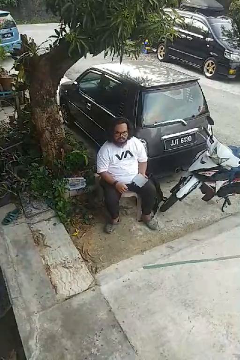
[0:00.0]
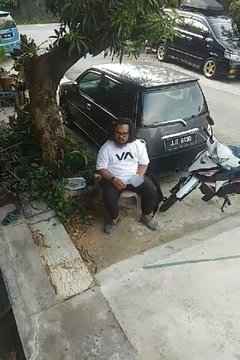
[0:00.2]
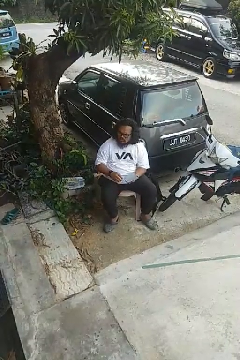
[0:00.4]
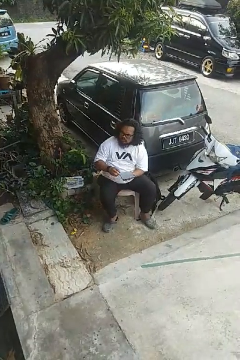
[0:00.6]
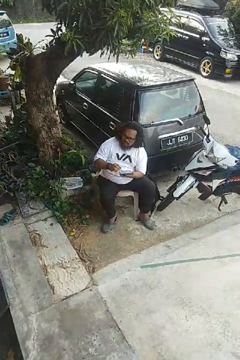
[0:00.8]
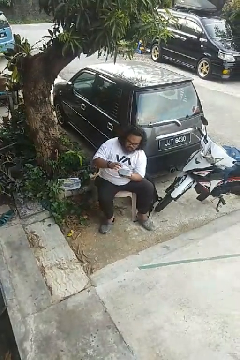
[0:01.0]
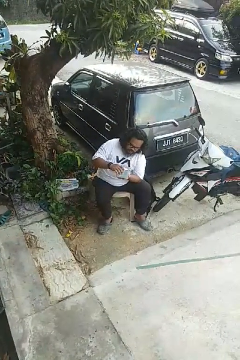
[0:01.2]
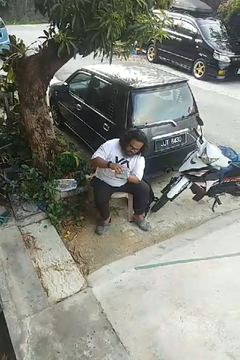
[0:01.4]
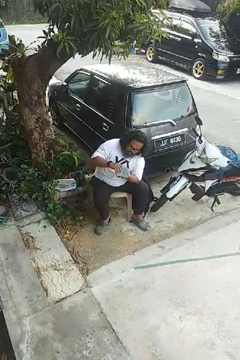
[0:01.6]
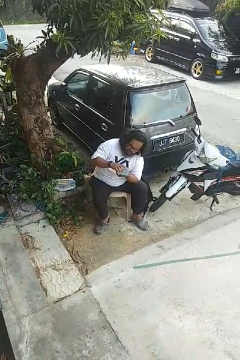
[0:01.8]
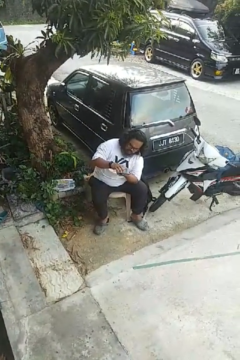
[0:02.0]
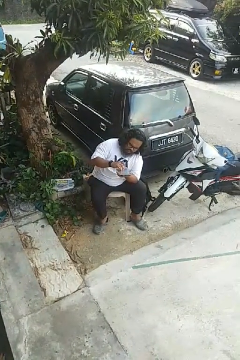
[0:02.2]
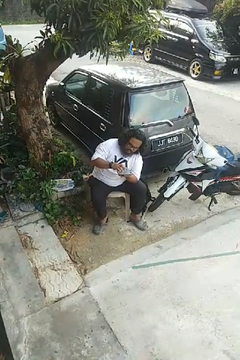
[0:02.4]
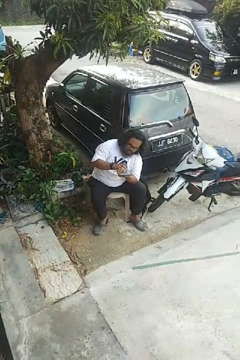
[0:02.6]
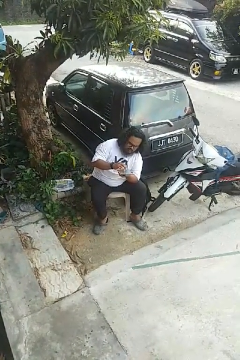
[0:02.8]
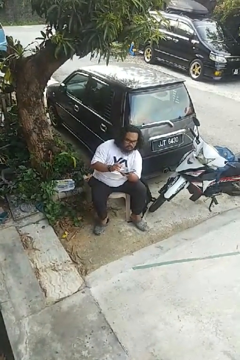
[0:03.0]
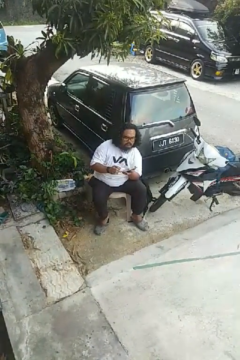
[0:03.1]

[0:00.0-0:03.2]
person interacts with tablet

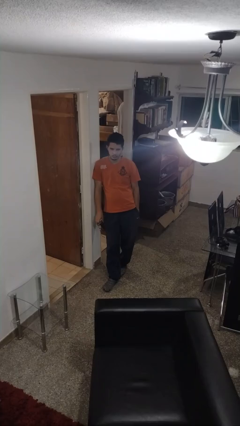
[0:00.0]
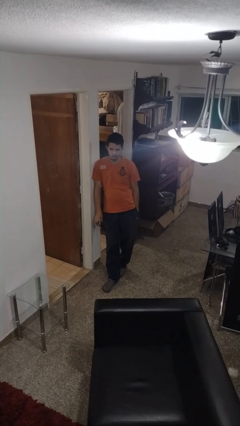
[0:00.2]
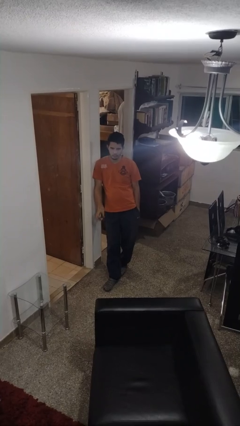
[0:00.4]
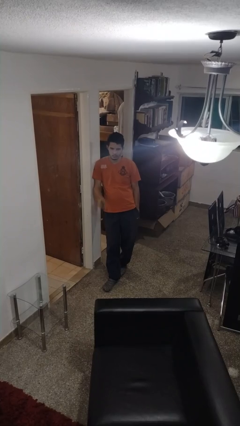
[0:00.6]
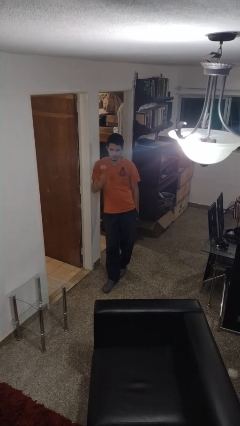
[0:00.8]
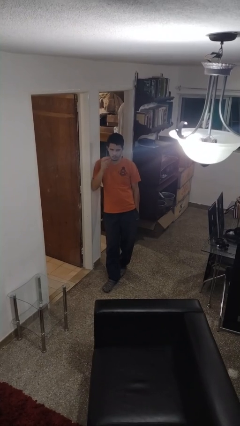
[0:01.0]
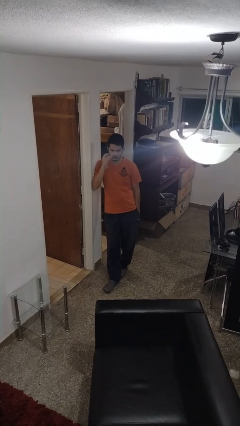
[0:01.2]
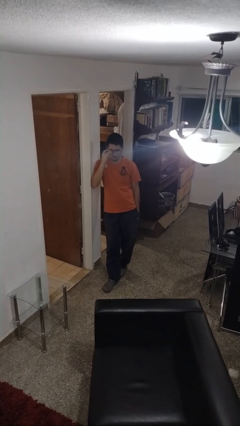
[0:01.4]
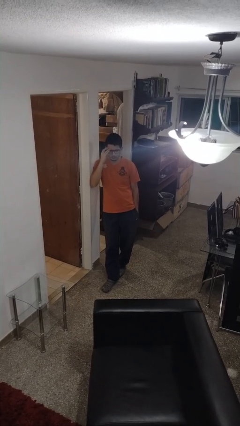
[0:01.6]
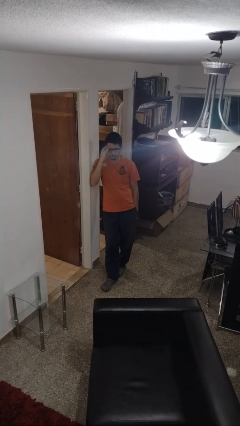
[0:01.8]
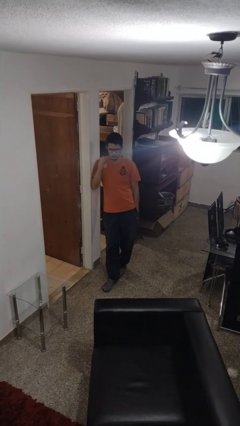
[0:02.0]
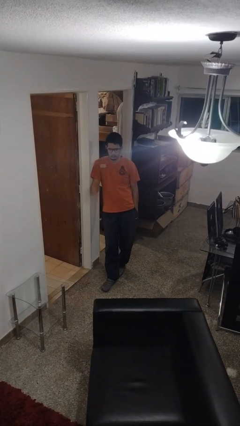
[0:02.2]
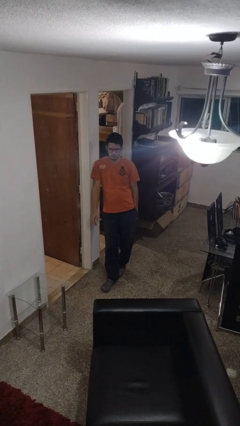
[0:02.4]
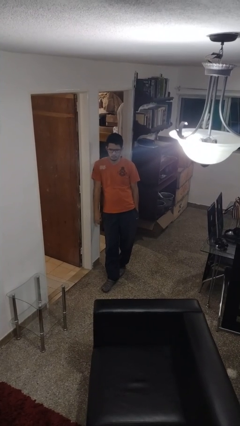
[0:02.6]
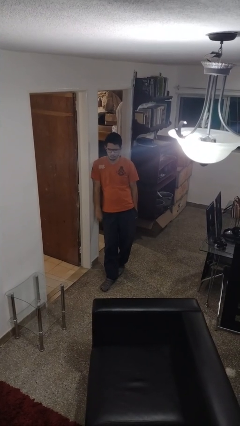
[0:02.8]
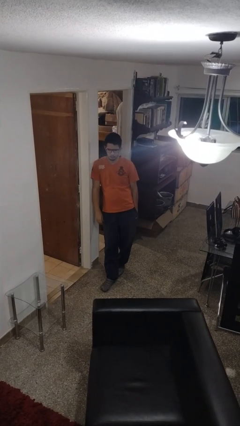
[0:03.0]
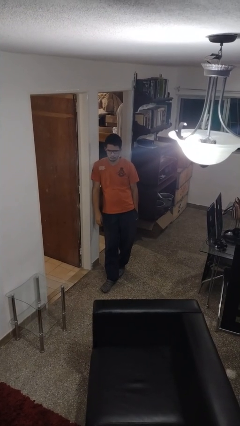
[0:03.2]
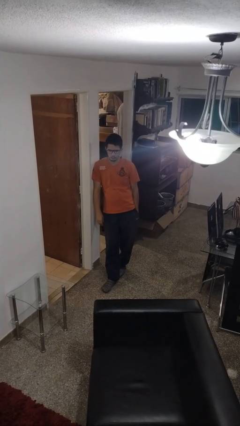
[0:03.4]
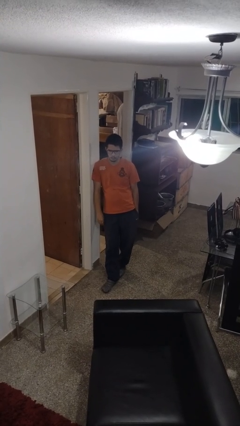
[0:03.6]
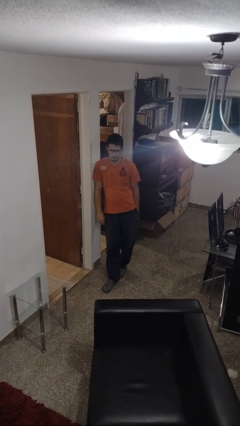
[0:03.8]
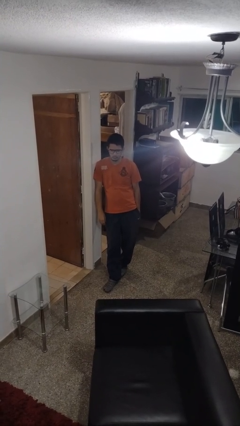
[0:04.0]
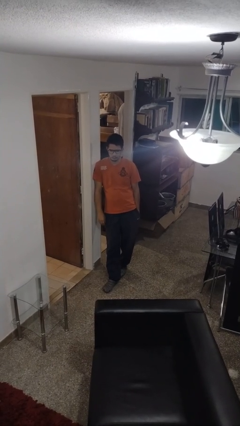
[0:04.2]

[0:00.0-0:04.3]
person puts on glasses

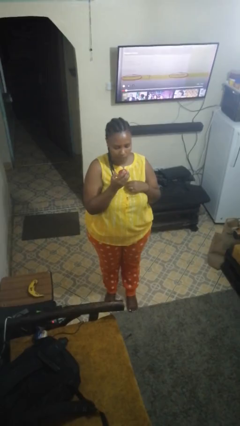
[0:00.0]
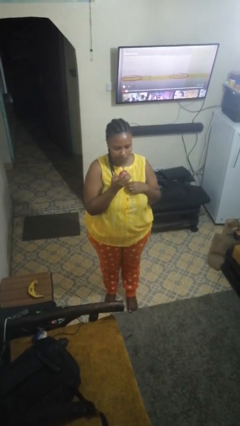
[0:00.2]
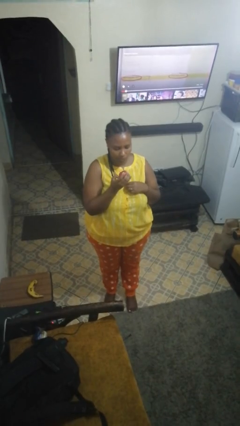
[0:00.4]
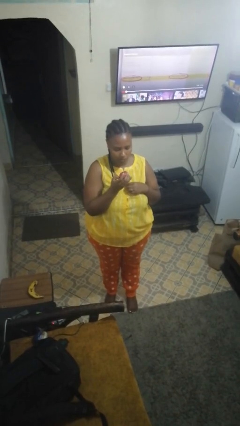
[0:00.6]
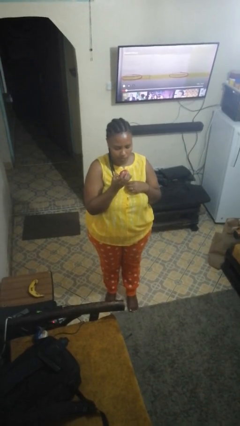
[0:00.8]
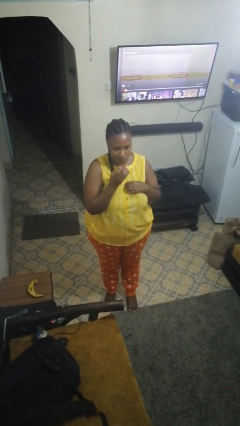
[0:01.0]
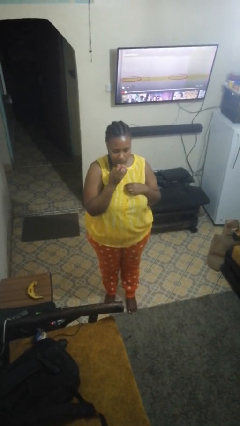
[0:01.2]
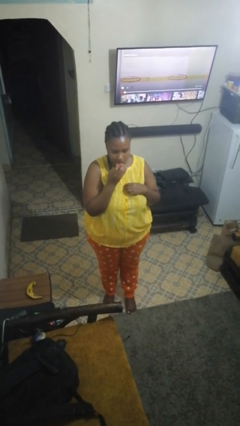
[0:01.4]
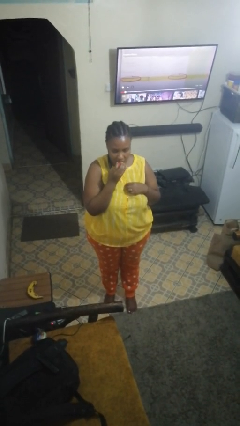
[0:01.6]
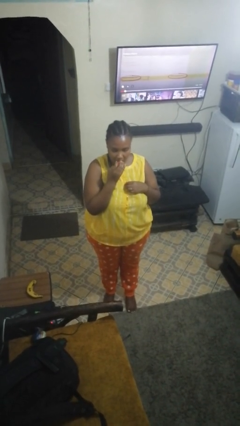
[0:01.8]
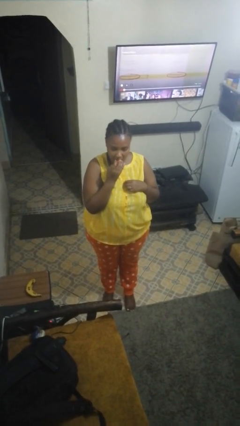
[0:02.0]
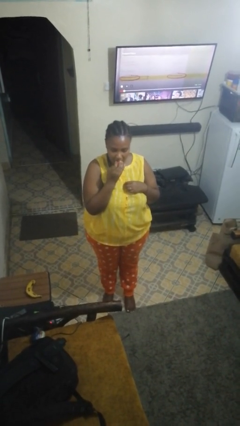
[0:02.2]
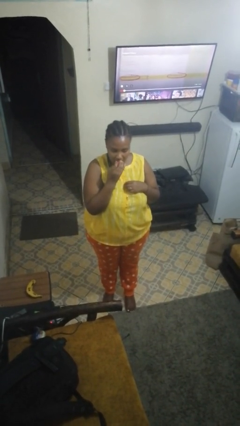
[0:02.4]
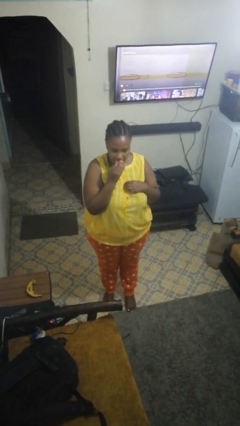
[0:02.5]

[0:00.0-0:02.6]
person eats apple

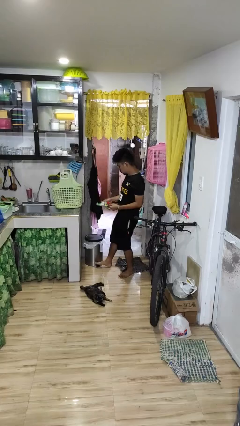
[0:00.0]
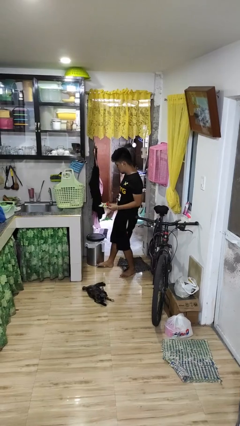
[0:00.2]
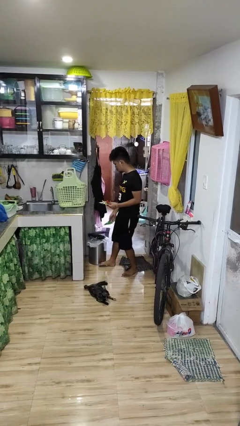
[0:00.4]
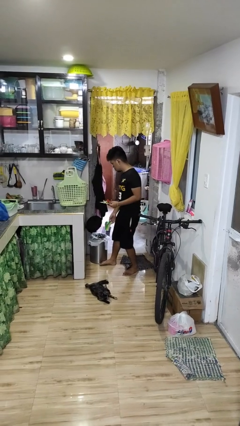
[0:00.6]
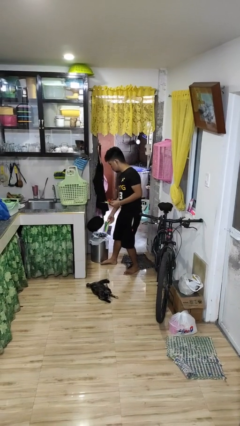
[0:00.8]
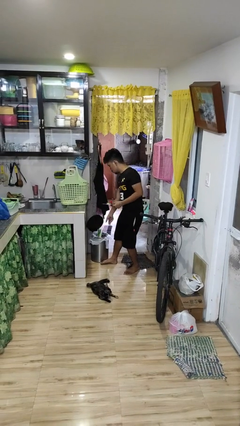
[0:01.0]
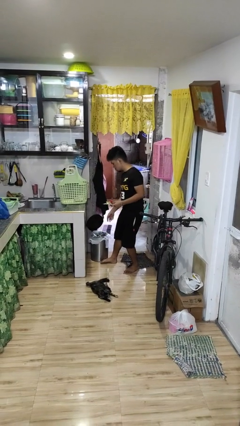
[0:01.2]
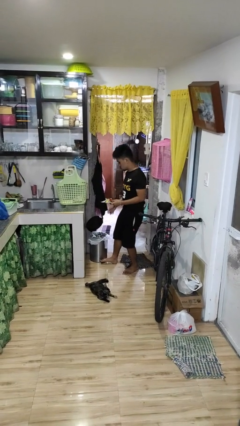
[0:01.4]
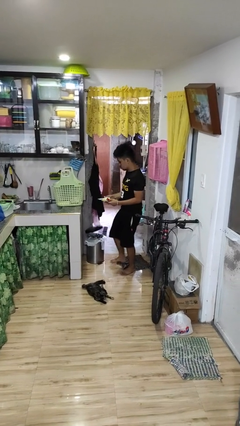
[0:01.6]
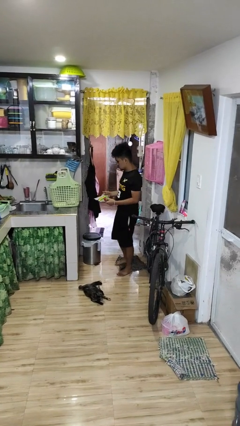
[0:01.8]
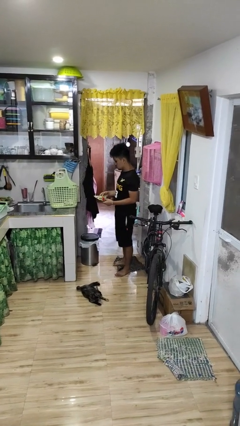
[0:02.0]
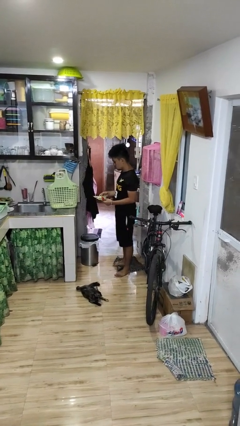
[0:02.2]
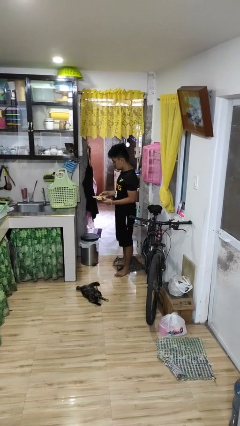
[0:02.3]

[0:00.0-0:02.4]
person discards trash

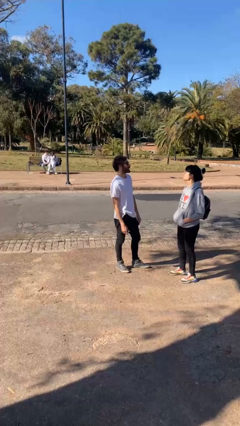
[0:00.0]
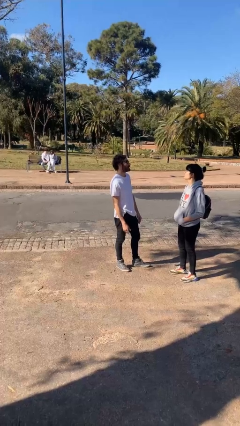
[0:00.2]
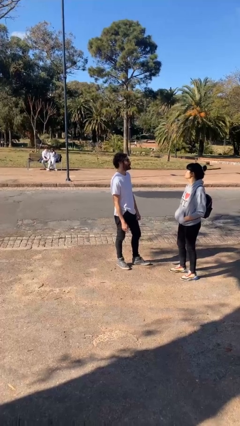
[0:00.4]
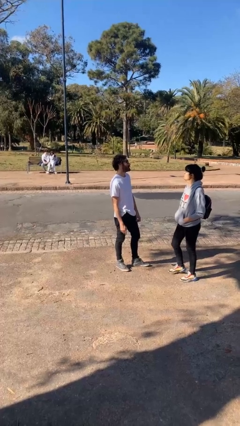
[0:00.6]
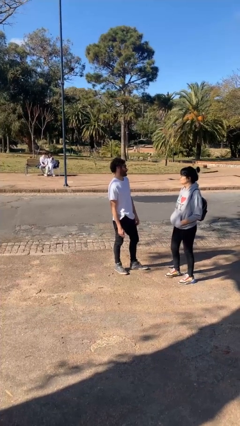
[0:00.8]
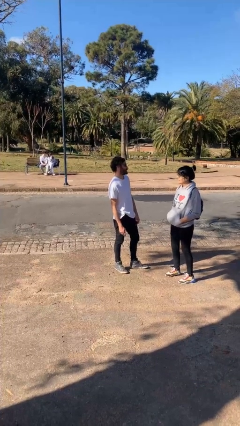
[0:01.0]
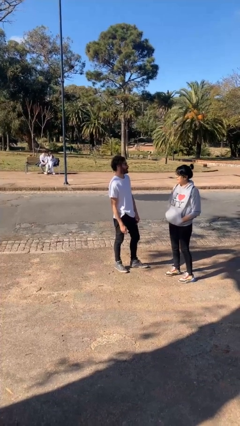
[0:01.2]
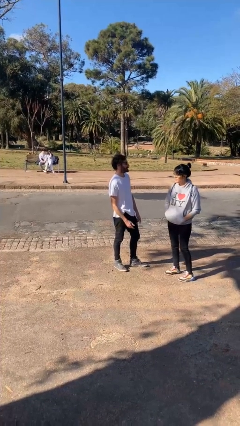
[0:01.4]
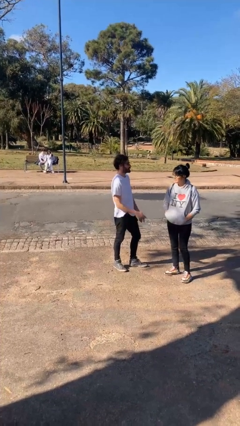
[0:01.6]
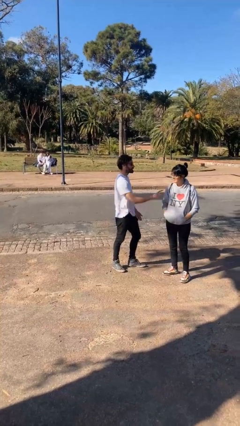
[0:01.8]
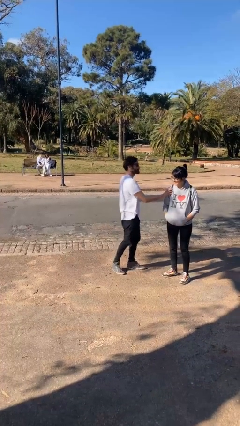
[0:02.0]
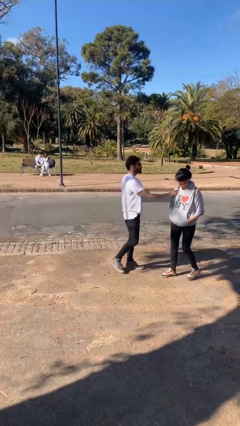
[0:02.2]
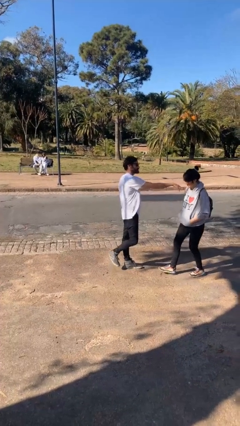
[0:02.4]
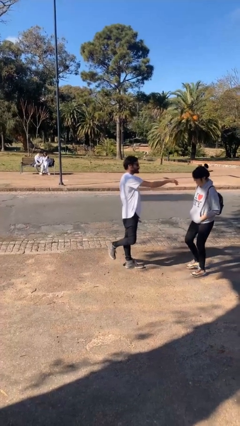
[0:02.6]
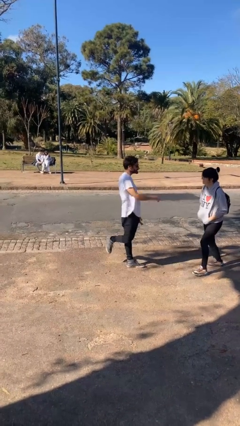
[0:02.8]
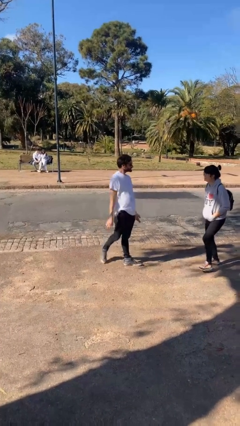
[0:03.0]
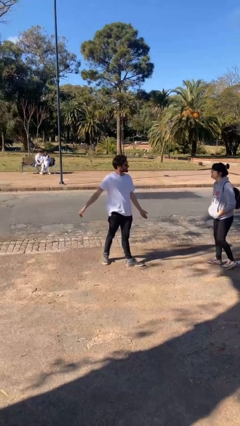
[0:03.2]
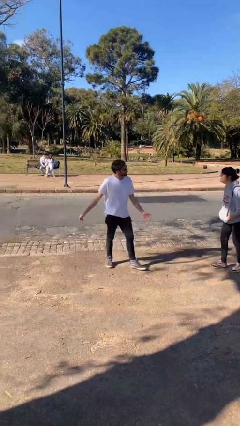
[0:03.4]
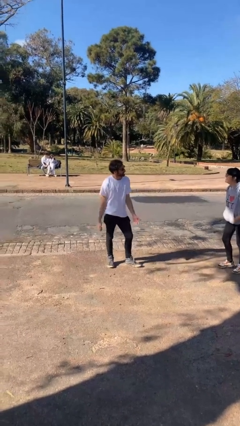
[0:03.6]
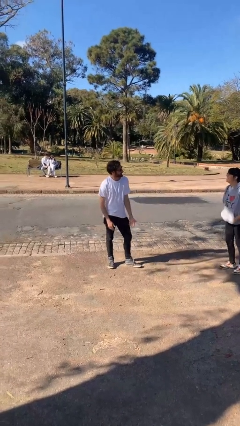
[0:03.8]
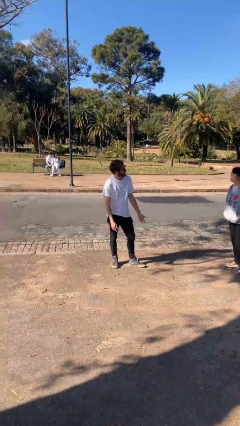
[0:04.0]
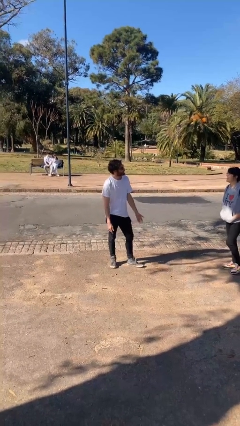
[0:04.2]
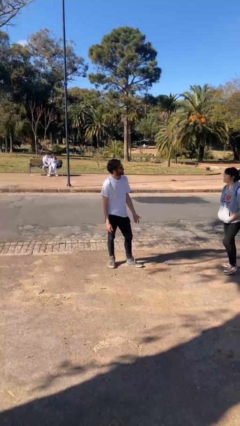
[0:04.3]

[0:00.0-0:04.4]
person shoves person

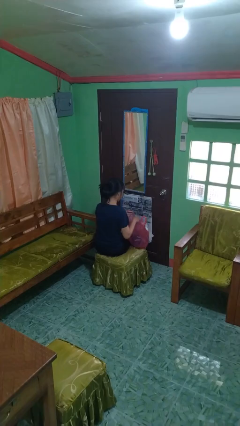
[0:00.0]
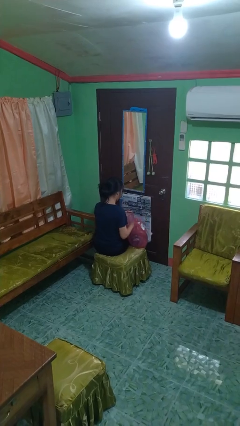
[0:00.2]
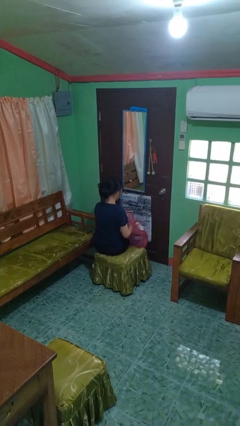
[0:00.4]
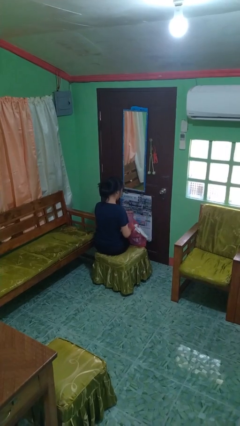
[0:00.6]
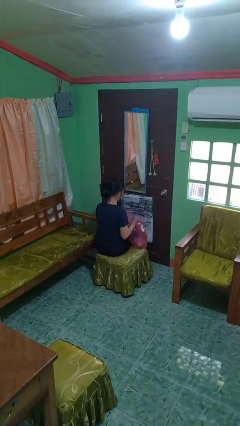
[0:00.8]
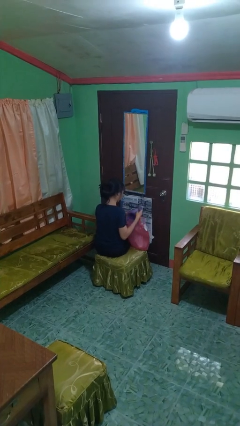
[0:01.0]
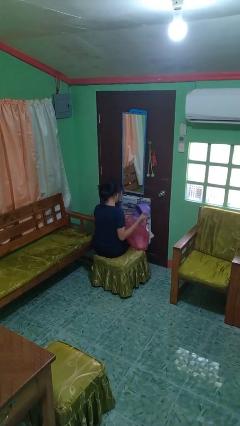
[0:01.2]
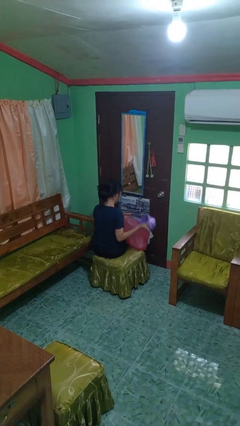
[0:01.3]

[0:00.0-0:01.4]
person takes object from bag
